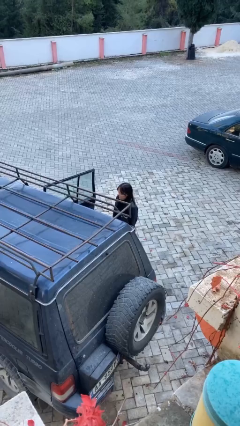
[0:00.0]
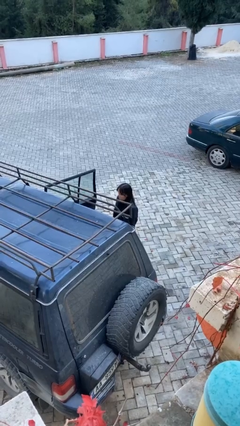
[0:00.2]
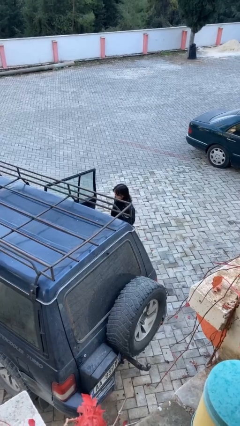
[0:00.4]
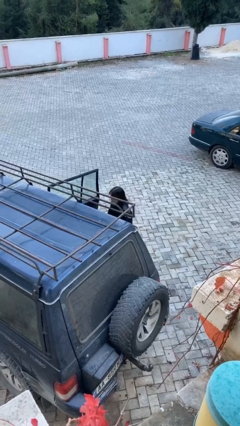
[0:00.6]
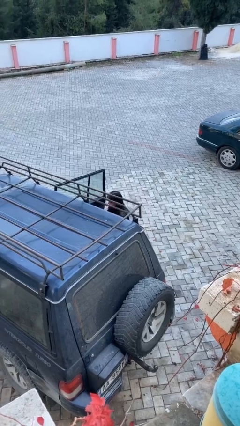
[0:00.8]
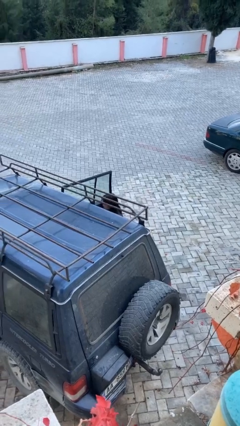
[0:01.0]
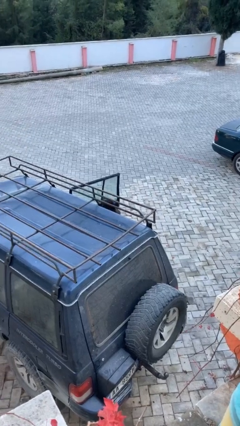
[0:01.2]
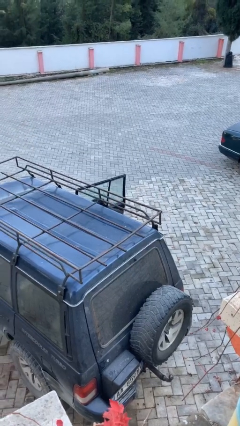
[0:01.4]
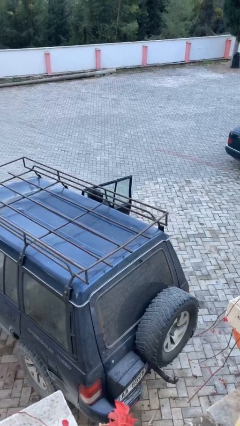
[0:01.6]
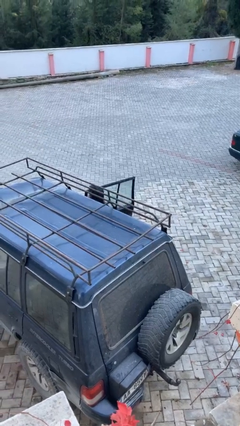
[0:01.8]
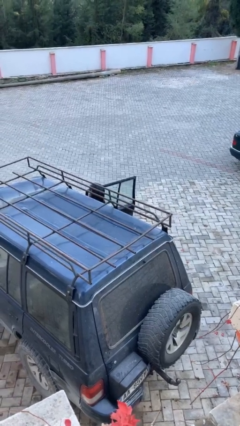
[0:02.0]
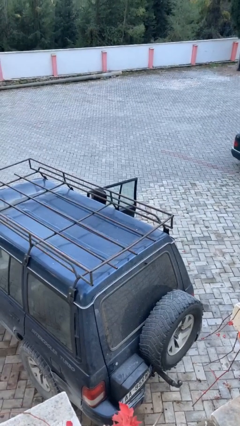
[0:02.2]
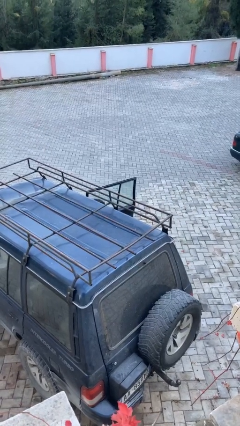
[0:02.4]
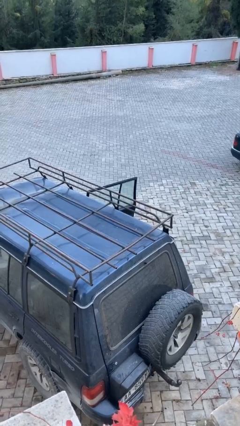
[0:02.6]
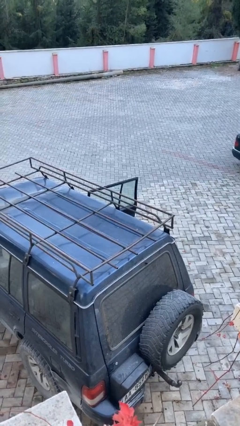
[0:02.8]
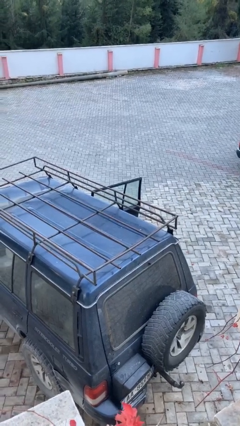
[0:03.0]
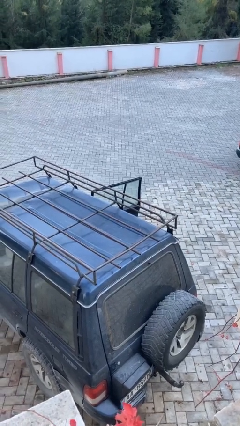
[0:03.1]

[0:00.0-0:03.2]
person enters car

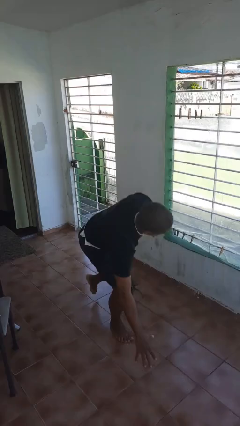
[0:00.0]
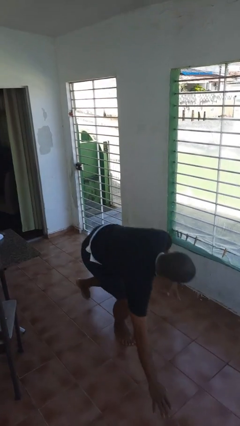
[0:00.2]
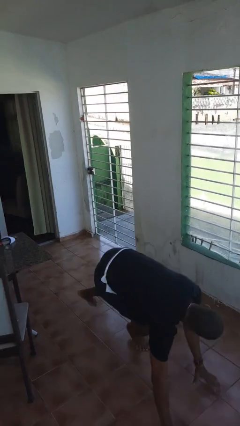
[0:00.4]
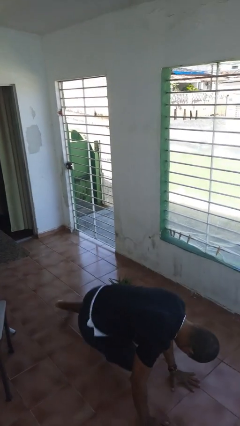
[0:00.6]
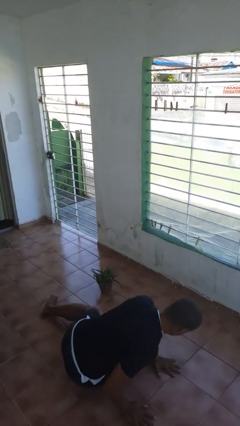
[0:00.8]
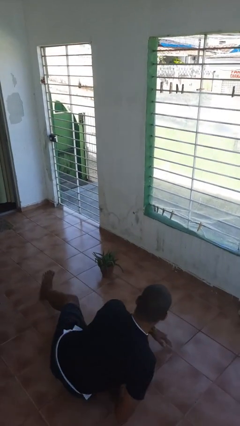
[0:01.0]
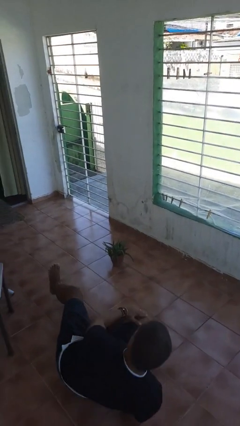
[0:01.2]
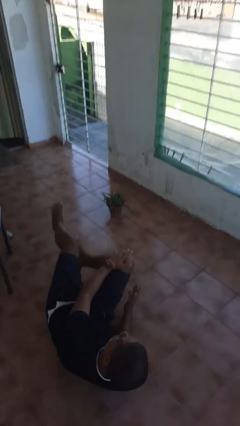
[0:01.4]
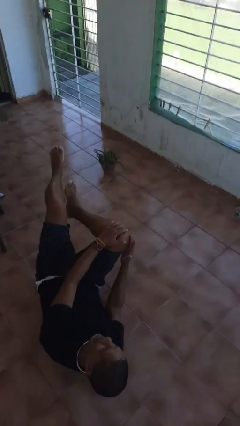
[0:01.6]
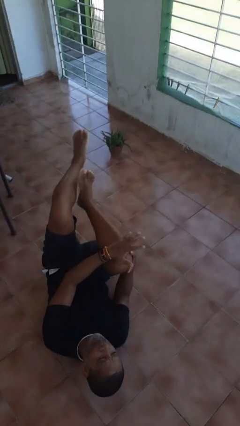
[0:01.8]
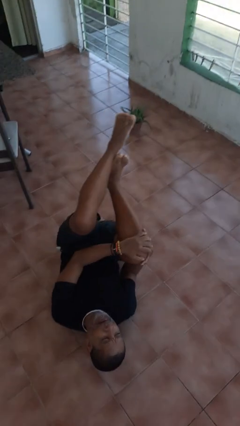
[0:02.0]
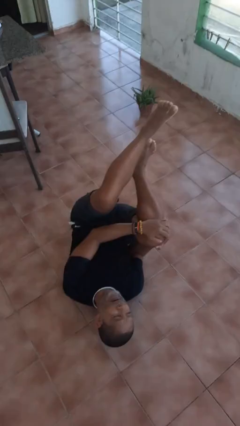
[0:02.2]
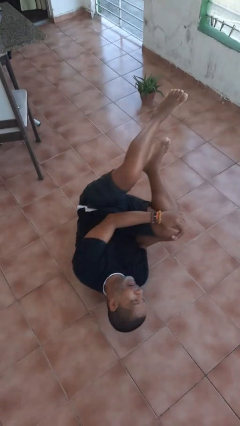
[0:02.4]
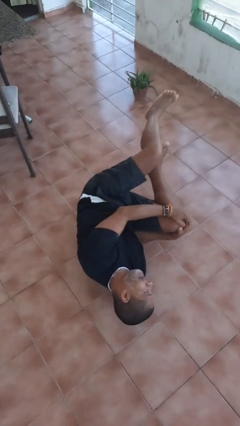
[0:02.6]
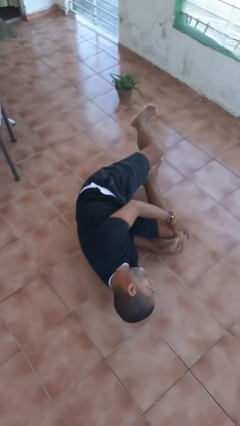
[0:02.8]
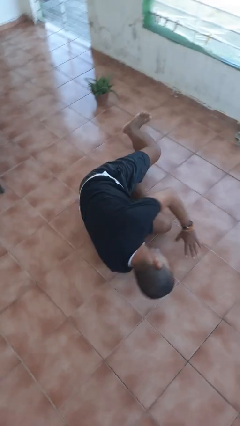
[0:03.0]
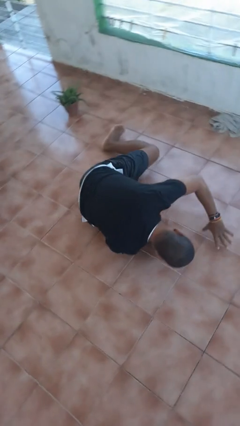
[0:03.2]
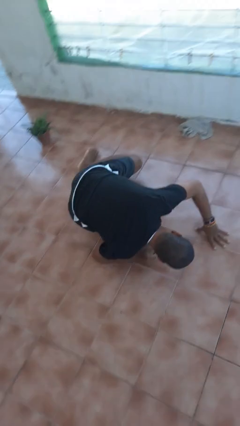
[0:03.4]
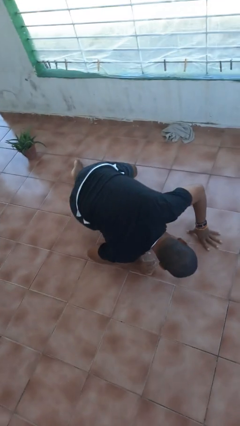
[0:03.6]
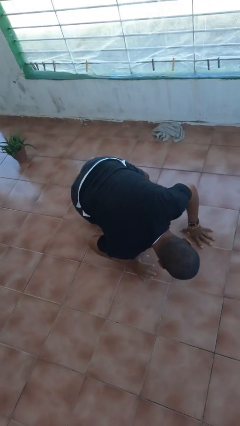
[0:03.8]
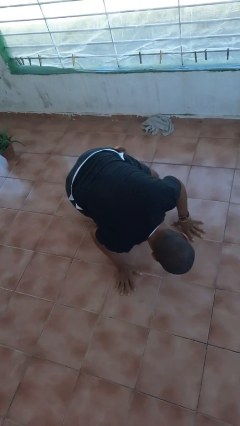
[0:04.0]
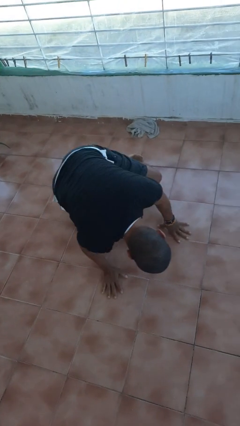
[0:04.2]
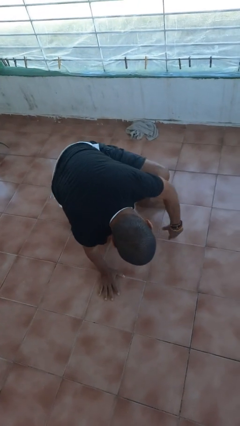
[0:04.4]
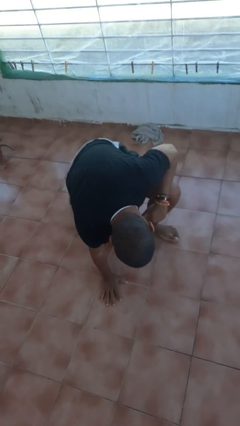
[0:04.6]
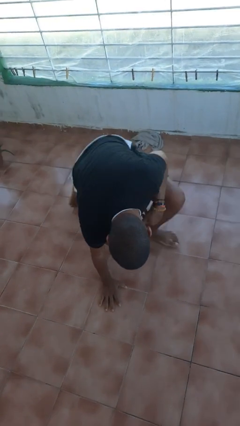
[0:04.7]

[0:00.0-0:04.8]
person lies down on floor

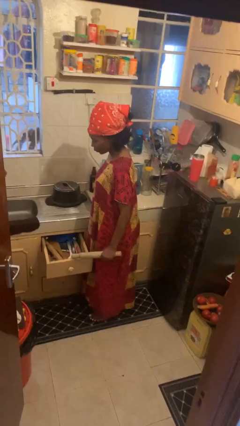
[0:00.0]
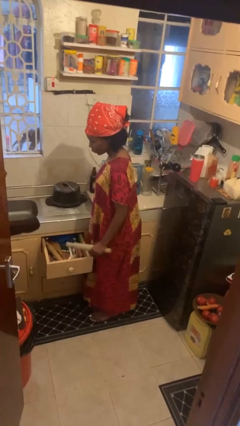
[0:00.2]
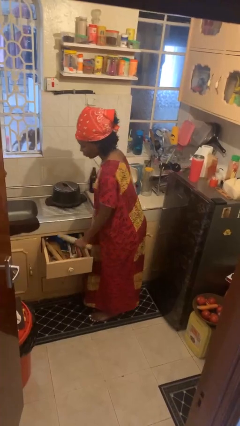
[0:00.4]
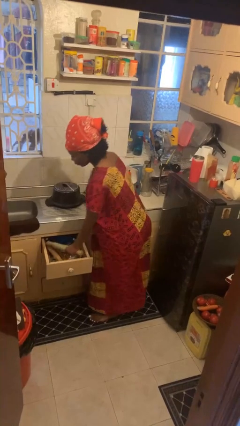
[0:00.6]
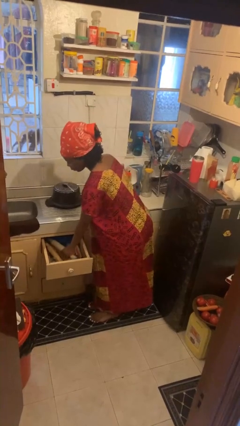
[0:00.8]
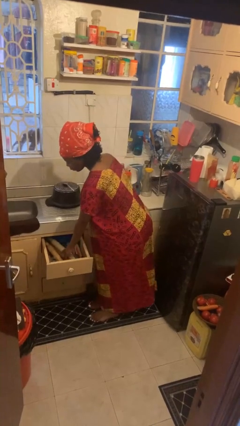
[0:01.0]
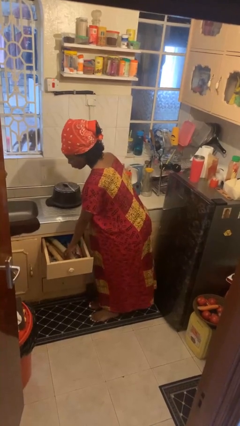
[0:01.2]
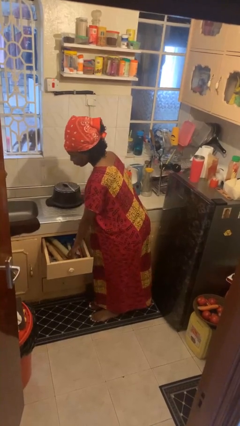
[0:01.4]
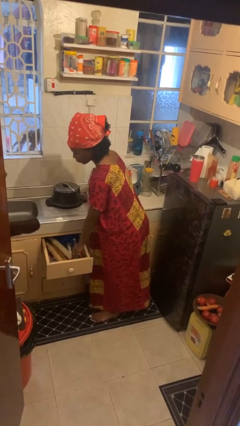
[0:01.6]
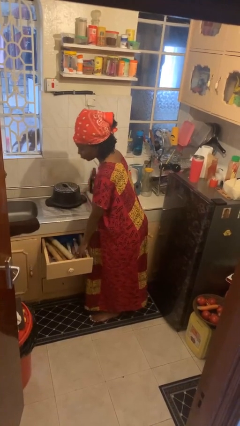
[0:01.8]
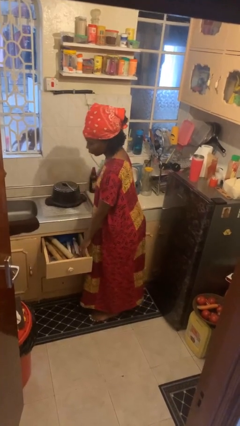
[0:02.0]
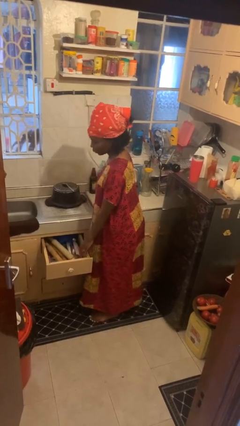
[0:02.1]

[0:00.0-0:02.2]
person puts object into kitchen drawer

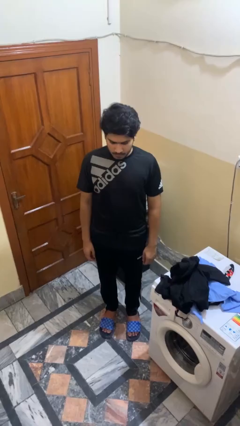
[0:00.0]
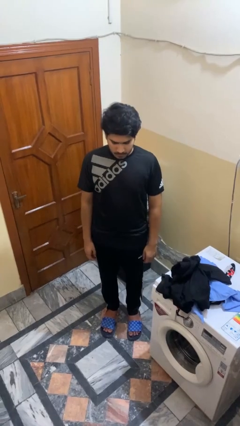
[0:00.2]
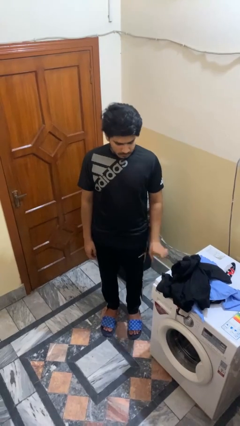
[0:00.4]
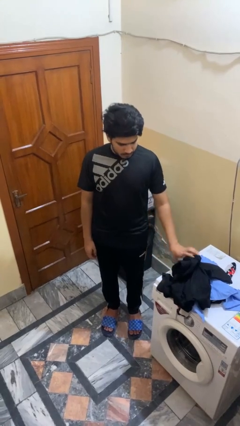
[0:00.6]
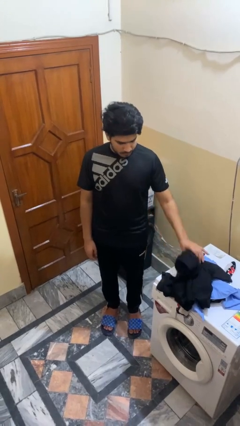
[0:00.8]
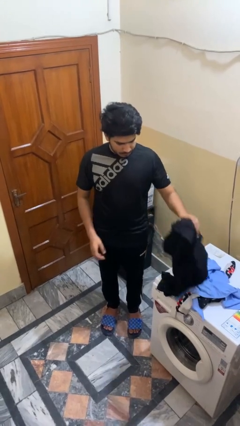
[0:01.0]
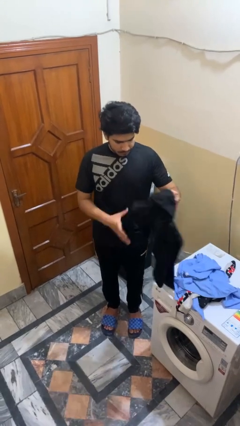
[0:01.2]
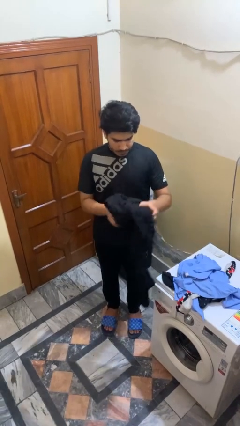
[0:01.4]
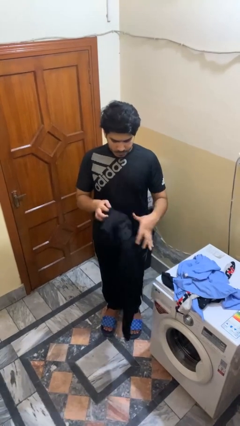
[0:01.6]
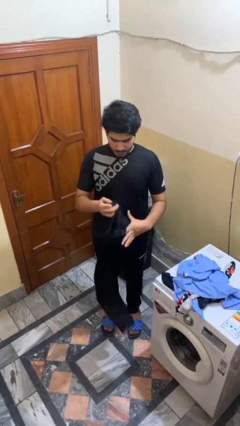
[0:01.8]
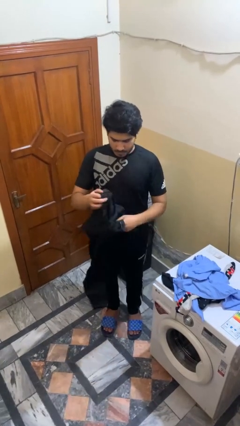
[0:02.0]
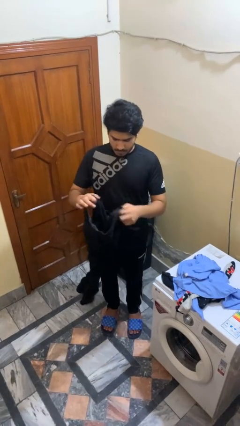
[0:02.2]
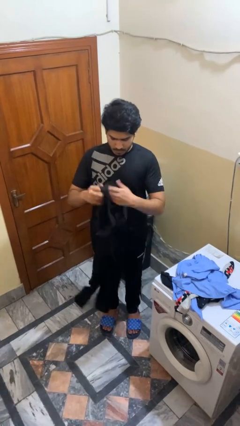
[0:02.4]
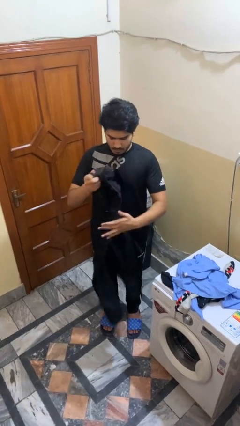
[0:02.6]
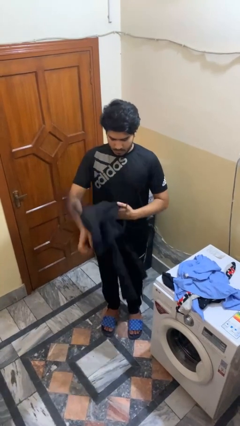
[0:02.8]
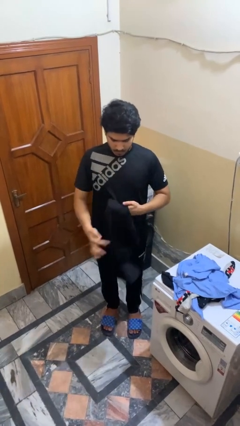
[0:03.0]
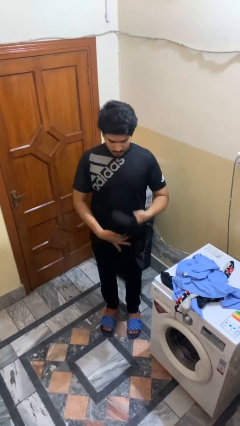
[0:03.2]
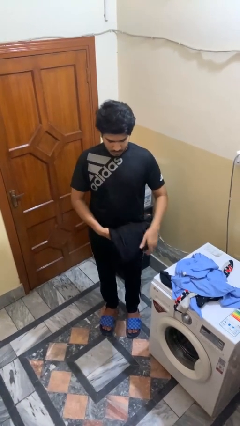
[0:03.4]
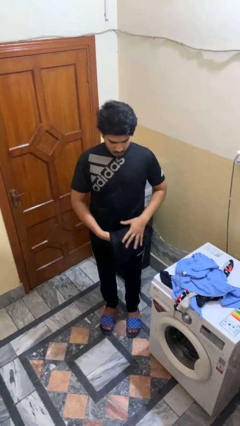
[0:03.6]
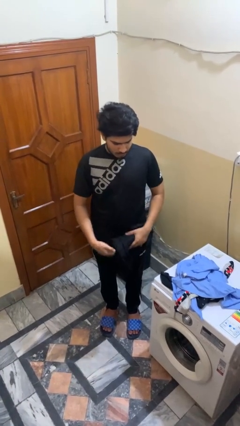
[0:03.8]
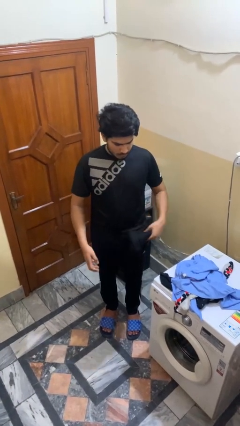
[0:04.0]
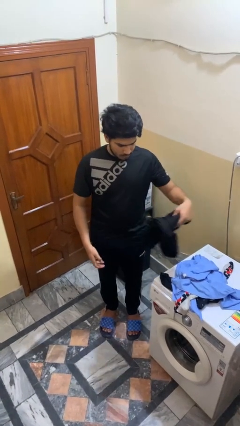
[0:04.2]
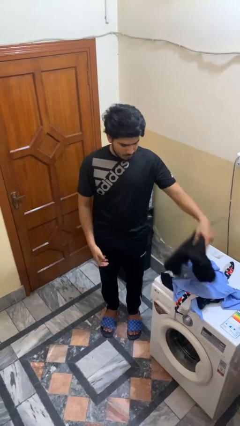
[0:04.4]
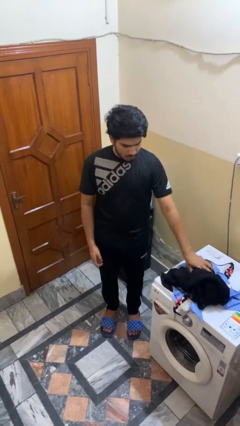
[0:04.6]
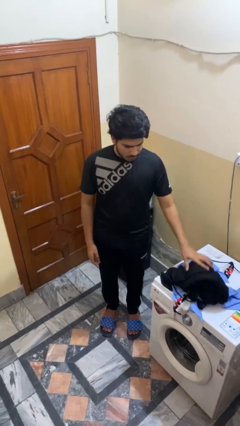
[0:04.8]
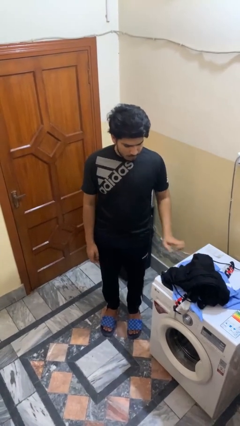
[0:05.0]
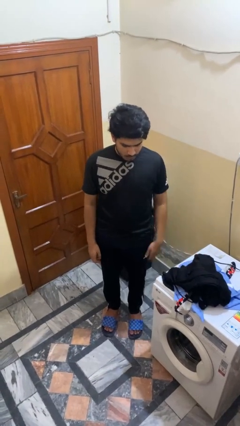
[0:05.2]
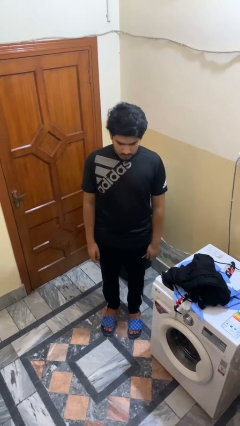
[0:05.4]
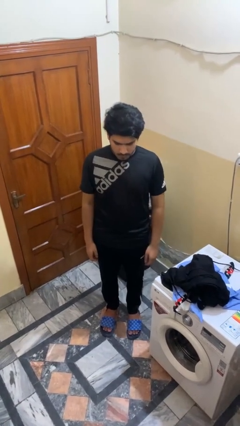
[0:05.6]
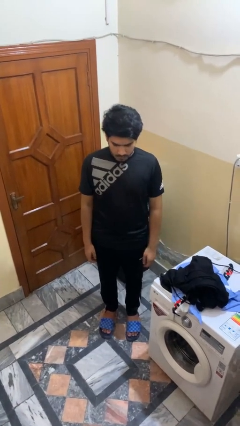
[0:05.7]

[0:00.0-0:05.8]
person folds pants

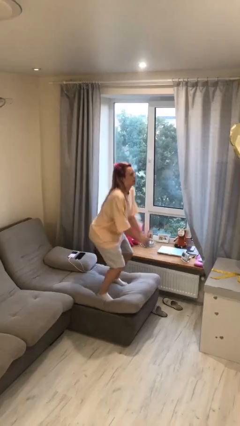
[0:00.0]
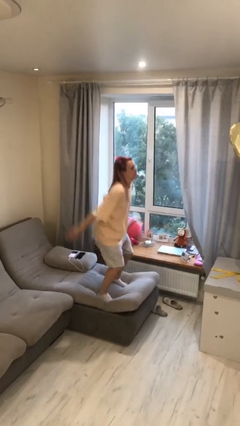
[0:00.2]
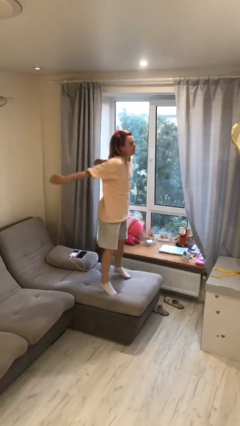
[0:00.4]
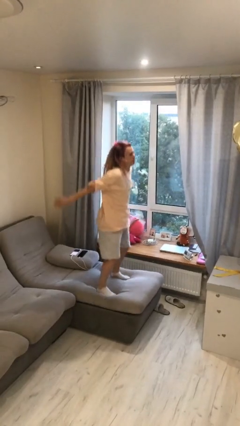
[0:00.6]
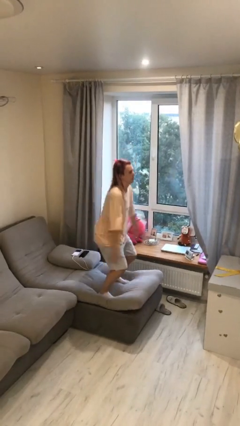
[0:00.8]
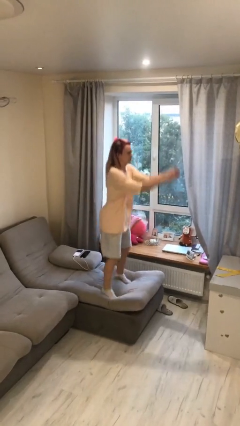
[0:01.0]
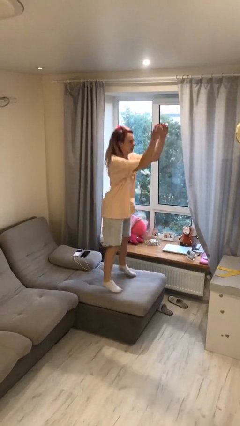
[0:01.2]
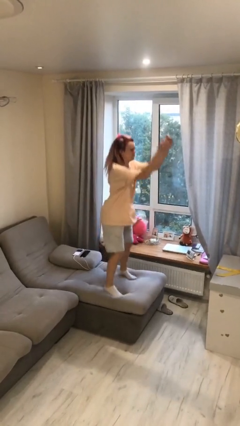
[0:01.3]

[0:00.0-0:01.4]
person jumps on couch
